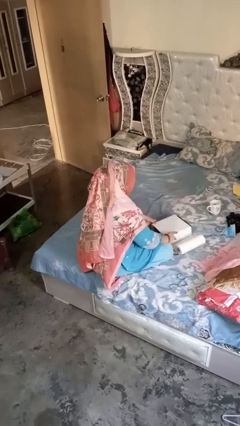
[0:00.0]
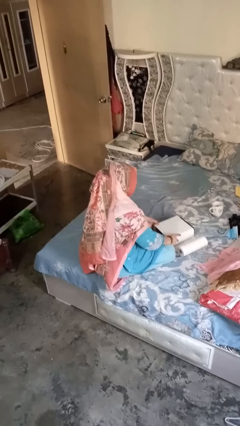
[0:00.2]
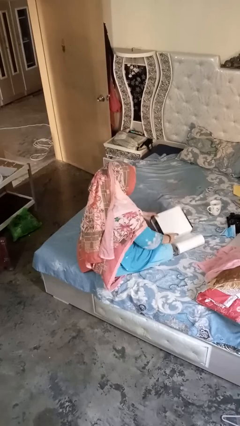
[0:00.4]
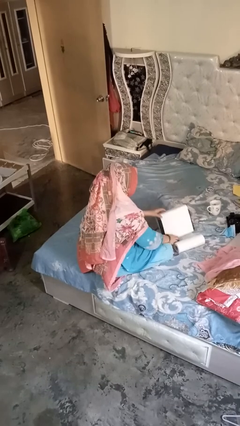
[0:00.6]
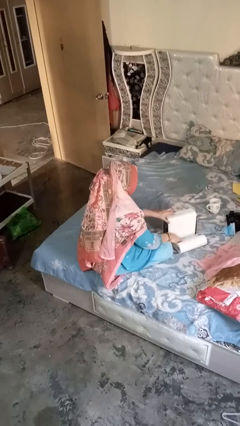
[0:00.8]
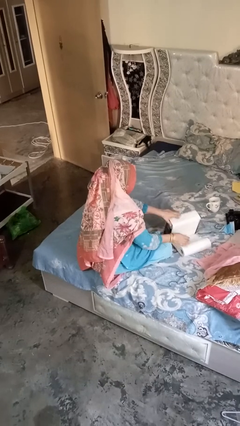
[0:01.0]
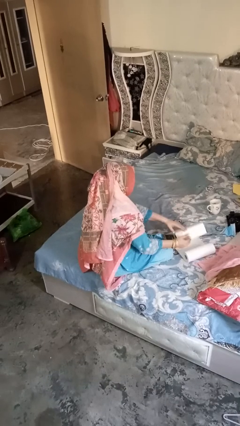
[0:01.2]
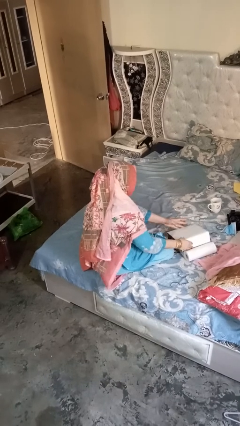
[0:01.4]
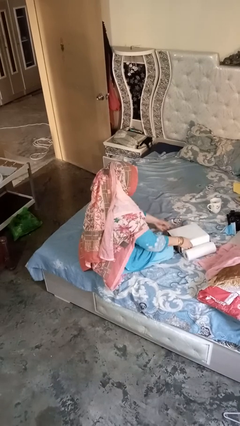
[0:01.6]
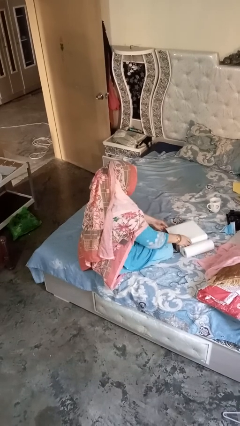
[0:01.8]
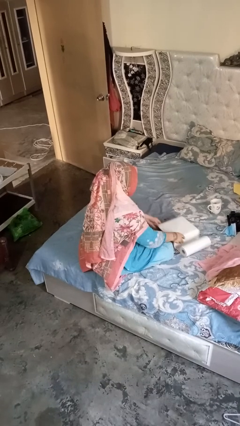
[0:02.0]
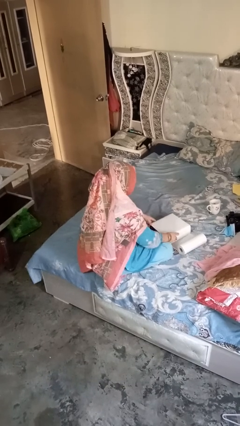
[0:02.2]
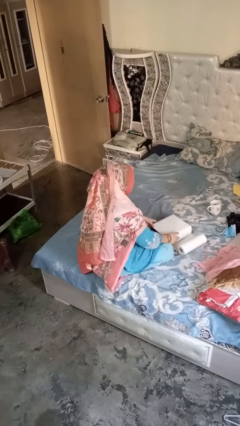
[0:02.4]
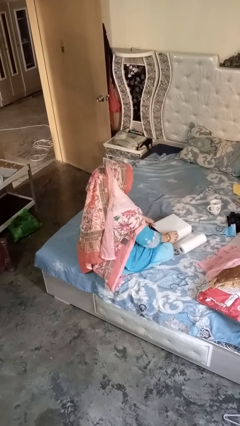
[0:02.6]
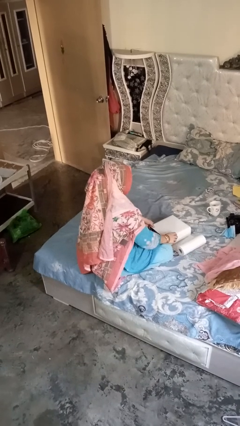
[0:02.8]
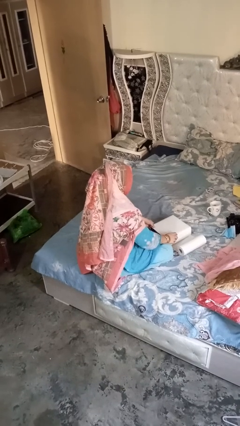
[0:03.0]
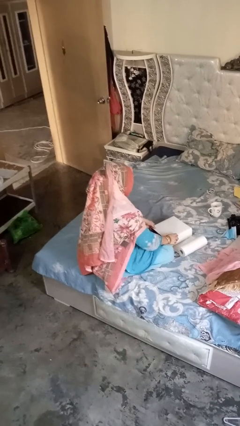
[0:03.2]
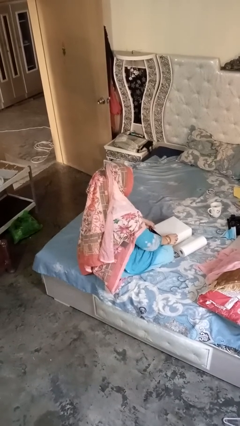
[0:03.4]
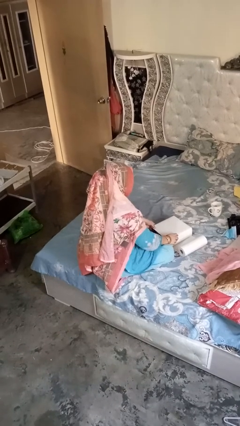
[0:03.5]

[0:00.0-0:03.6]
person wraps box

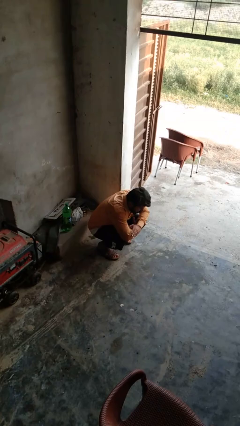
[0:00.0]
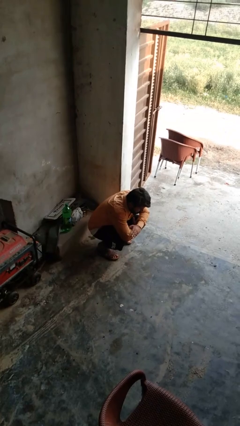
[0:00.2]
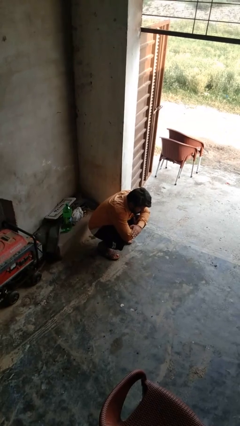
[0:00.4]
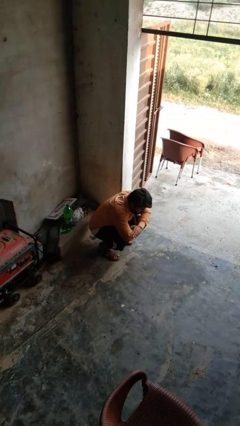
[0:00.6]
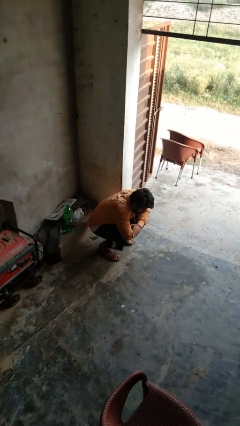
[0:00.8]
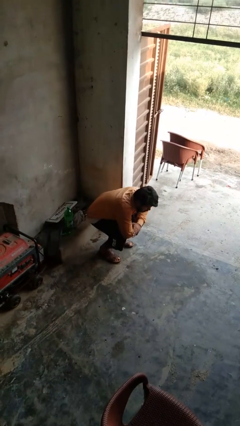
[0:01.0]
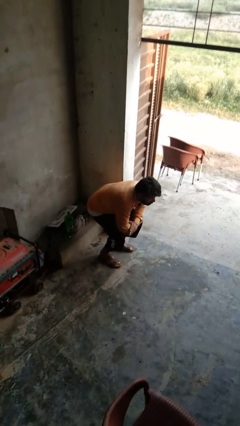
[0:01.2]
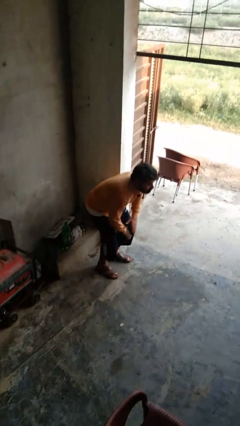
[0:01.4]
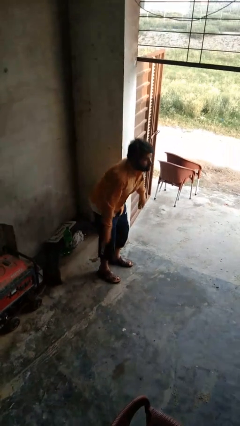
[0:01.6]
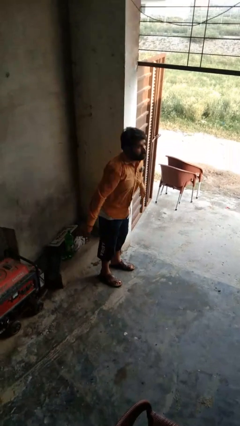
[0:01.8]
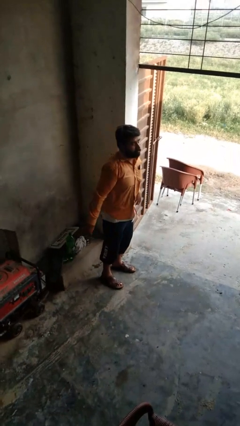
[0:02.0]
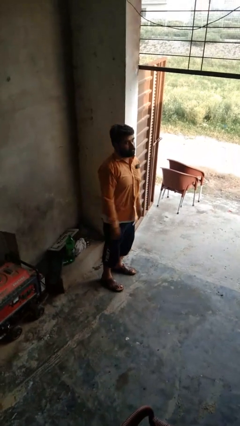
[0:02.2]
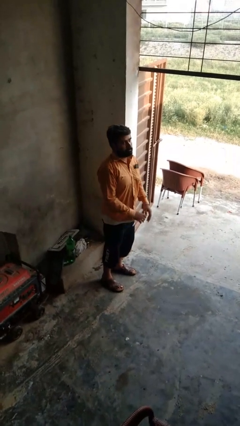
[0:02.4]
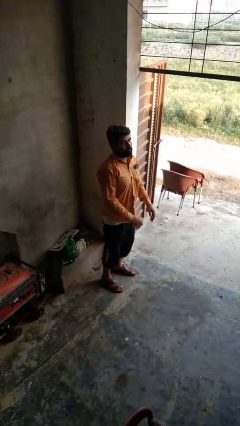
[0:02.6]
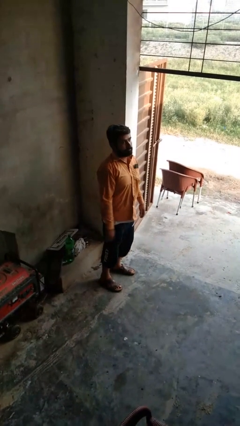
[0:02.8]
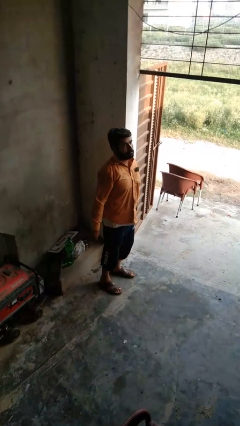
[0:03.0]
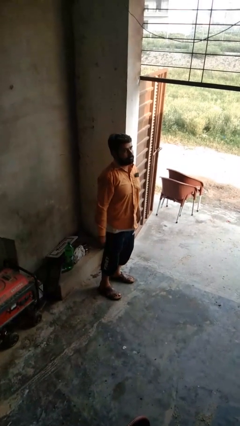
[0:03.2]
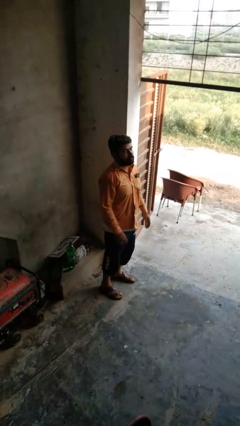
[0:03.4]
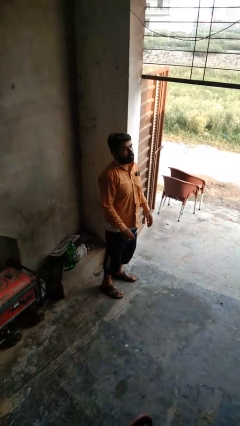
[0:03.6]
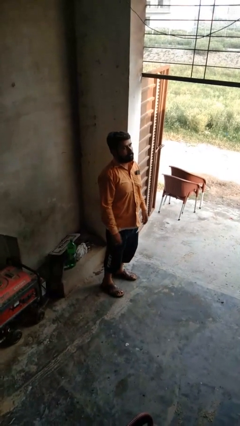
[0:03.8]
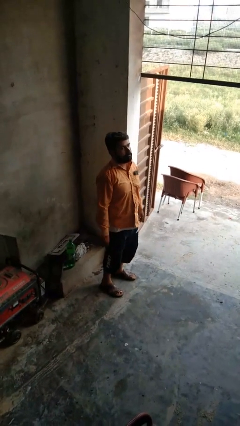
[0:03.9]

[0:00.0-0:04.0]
person stands up

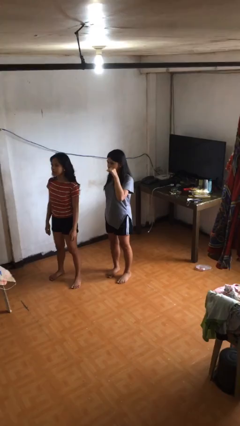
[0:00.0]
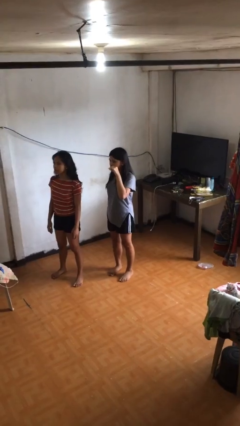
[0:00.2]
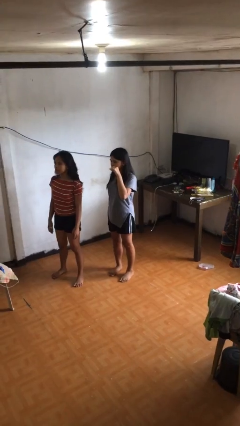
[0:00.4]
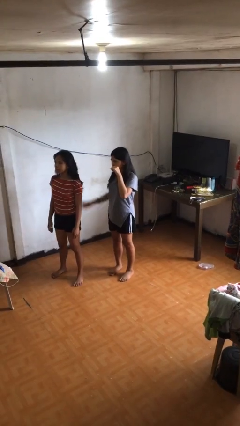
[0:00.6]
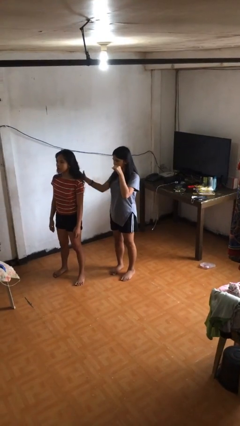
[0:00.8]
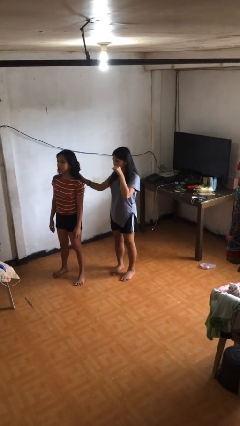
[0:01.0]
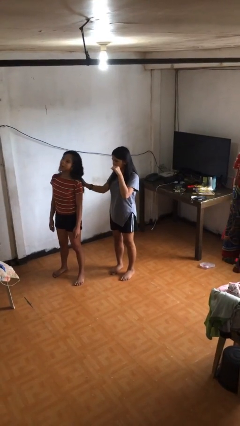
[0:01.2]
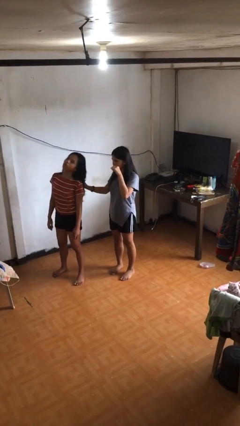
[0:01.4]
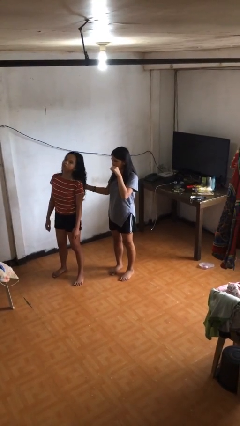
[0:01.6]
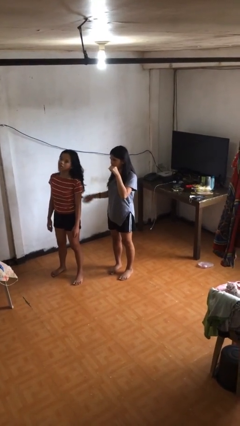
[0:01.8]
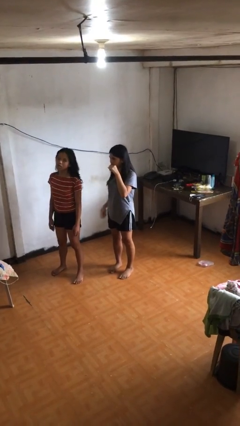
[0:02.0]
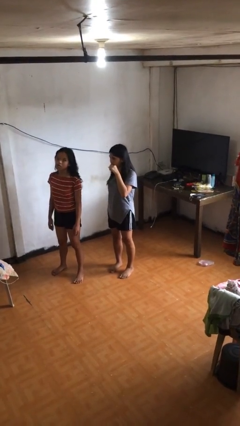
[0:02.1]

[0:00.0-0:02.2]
person grabs person by hair

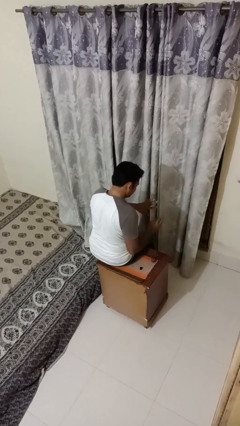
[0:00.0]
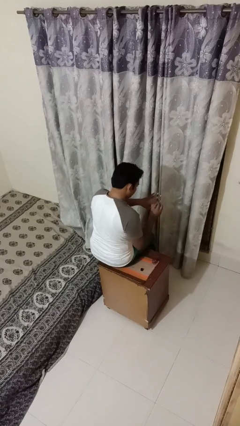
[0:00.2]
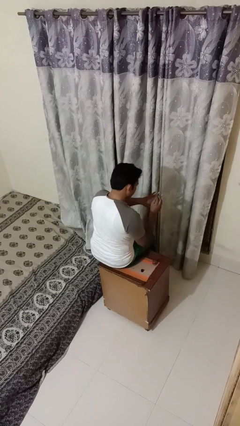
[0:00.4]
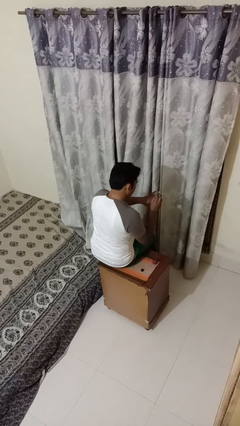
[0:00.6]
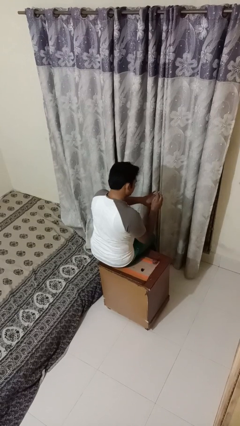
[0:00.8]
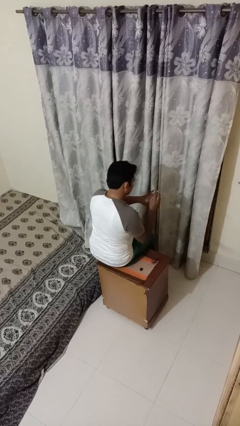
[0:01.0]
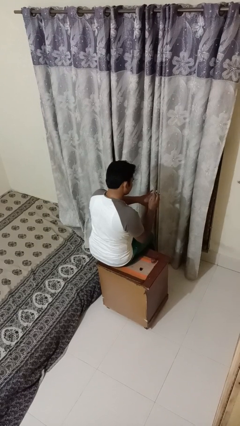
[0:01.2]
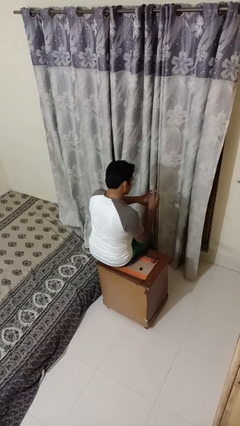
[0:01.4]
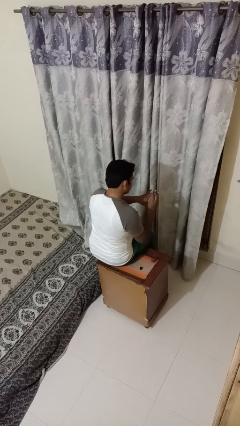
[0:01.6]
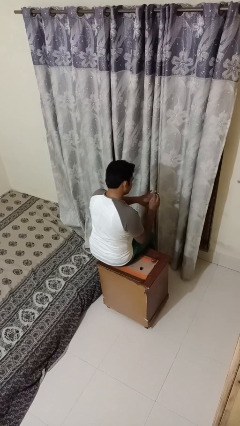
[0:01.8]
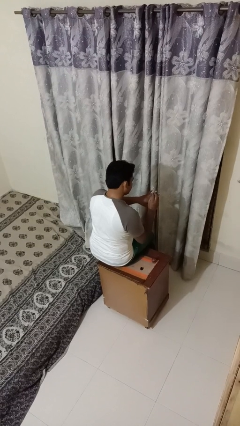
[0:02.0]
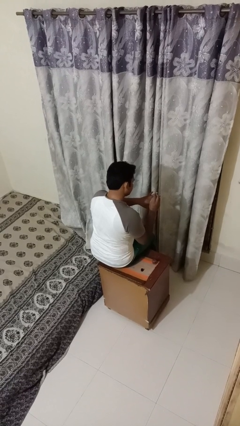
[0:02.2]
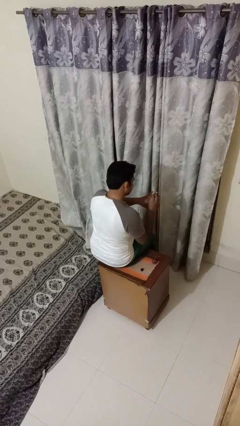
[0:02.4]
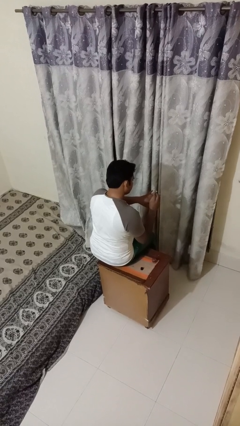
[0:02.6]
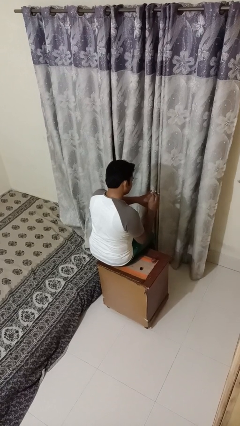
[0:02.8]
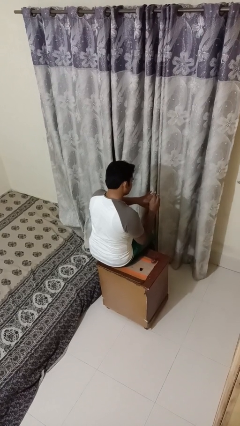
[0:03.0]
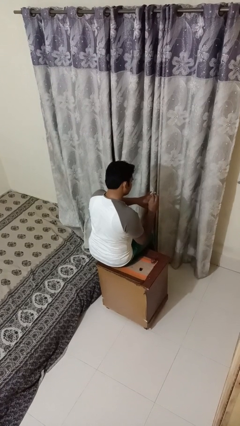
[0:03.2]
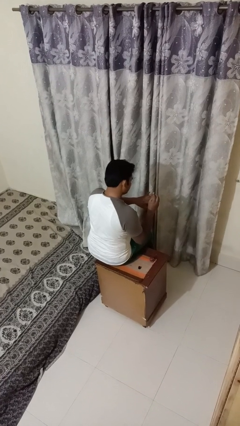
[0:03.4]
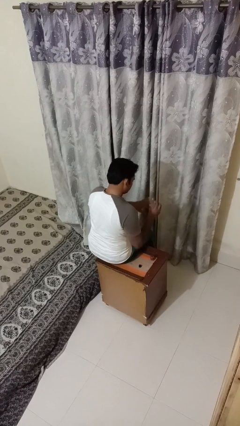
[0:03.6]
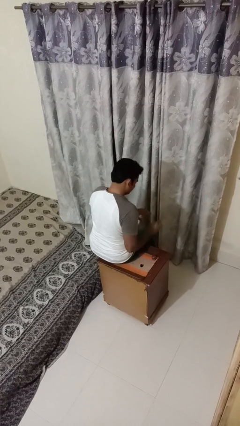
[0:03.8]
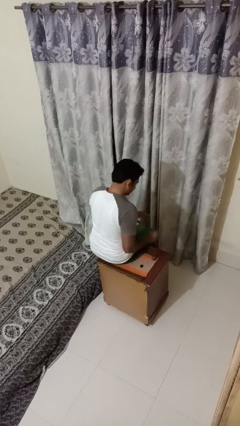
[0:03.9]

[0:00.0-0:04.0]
person paints fingernails

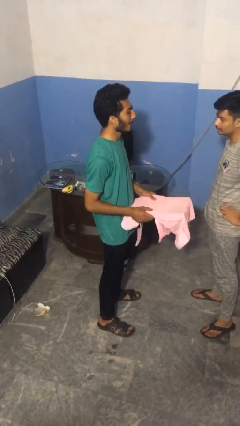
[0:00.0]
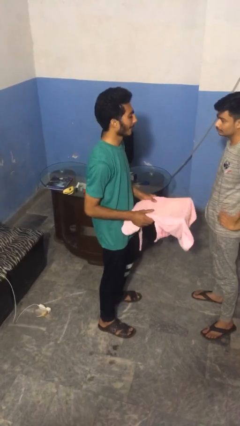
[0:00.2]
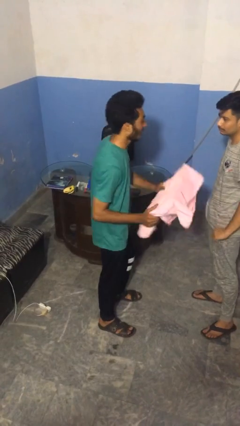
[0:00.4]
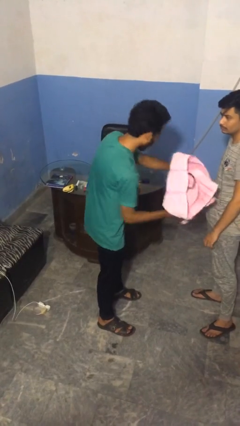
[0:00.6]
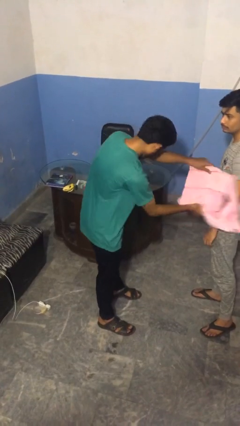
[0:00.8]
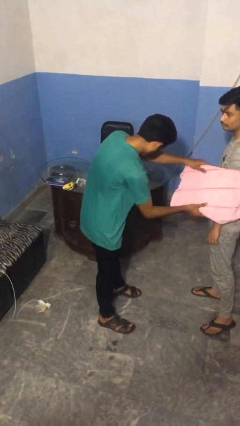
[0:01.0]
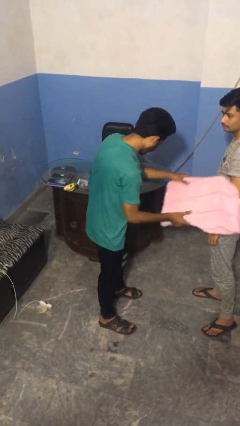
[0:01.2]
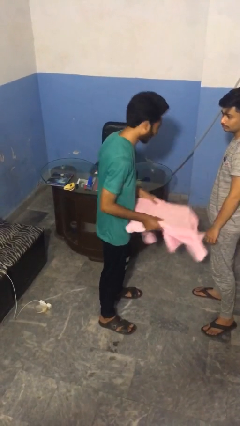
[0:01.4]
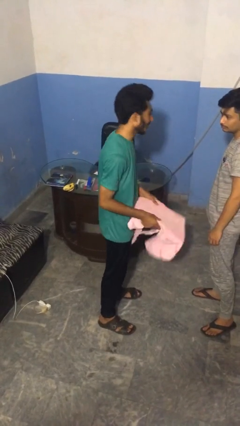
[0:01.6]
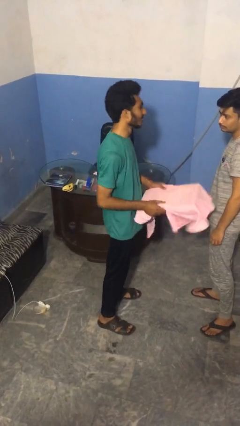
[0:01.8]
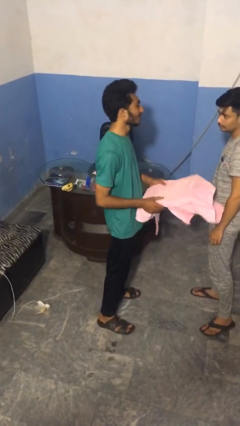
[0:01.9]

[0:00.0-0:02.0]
person hits person with pillow

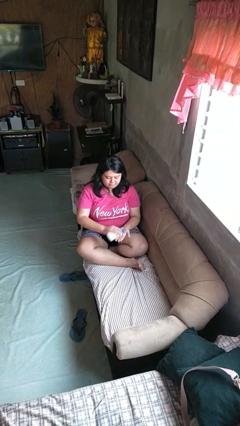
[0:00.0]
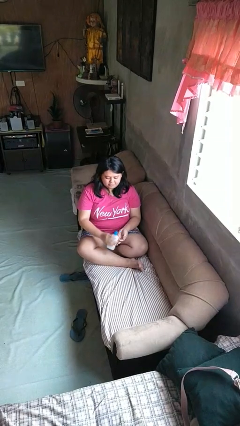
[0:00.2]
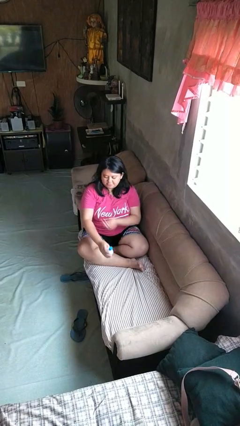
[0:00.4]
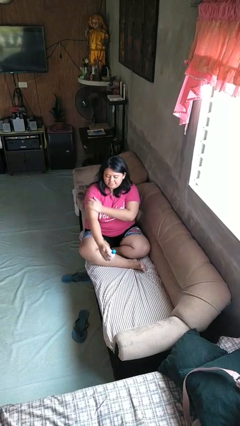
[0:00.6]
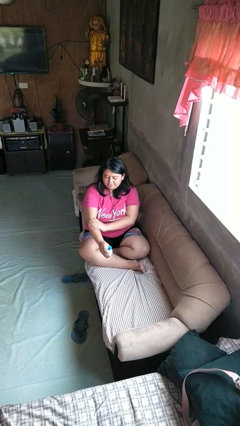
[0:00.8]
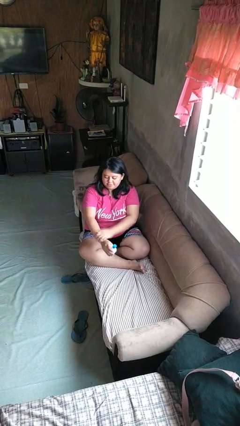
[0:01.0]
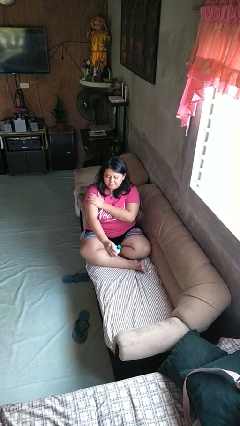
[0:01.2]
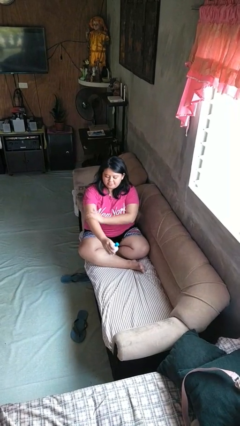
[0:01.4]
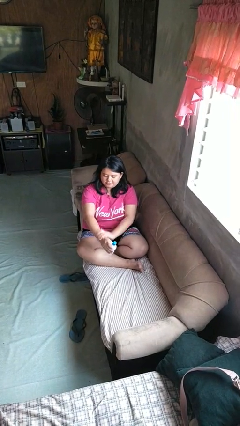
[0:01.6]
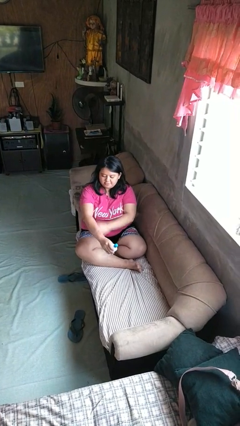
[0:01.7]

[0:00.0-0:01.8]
person applies sunscreen
